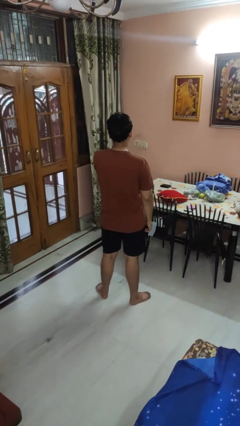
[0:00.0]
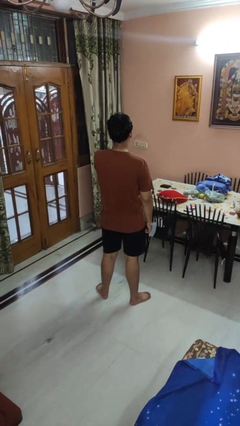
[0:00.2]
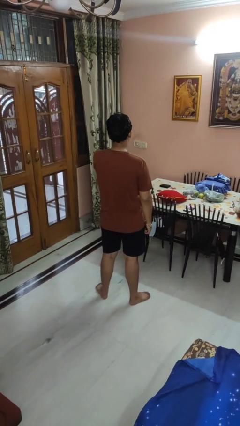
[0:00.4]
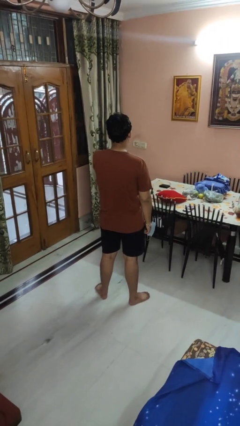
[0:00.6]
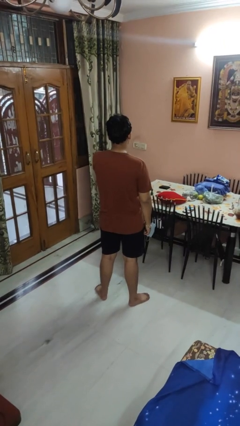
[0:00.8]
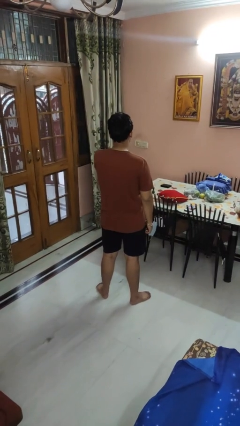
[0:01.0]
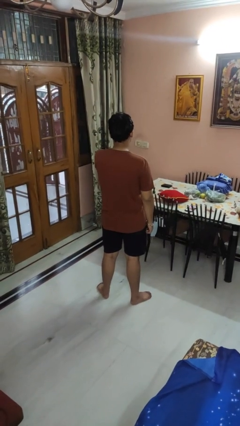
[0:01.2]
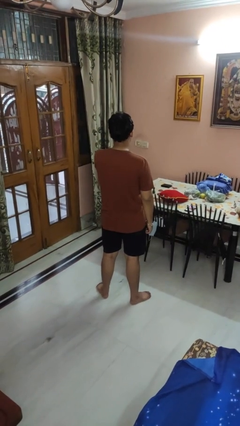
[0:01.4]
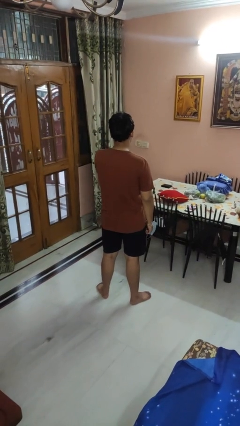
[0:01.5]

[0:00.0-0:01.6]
person gestures watch closely

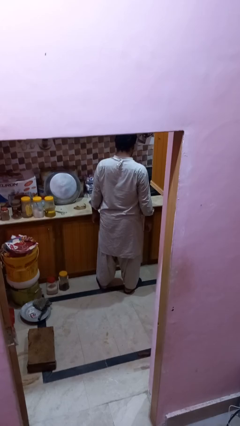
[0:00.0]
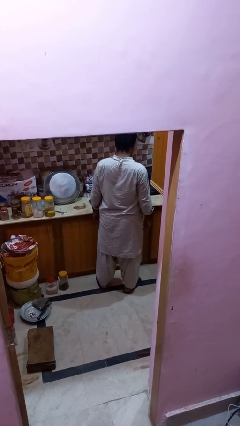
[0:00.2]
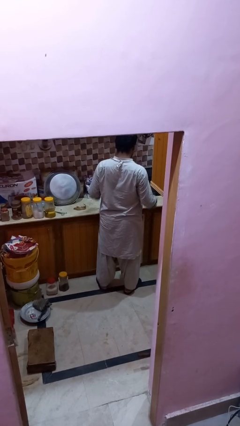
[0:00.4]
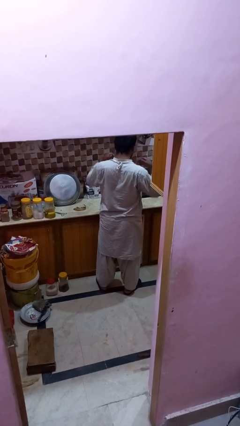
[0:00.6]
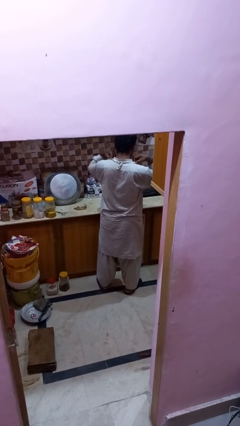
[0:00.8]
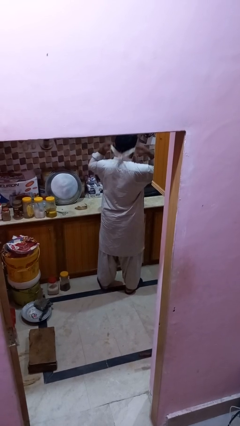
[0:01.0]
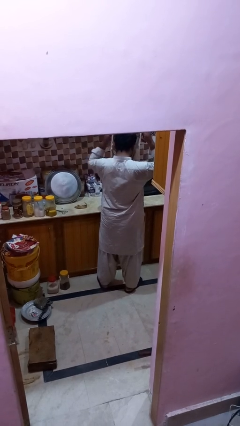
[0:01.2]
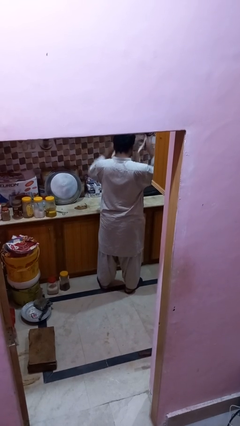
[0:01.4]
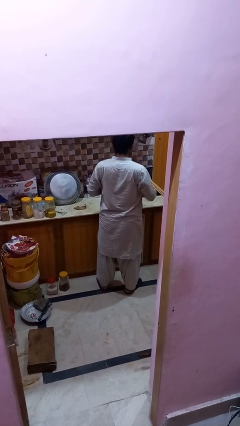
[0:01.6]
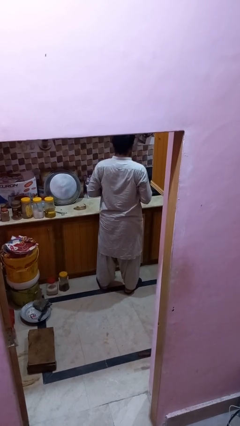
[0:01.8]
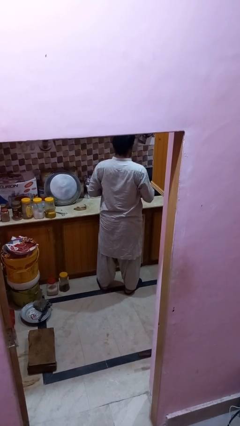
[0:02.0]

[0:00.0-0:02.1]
person takes off apron

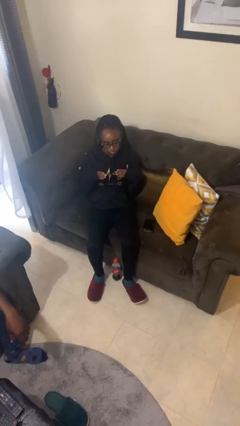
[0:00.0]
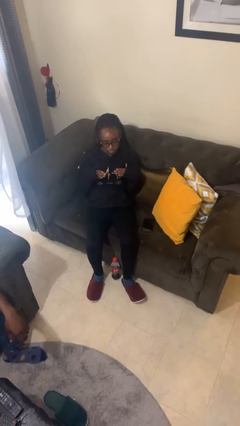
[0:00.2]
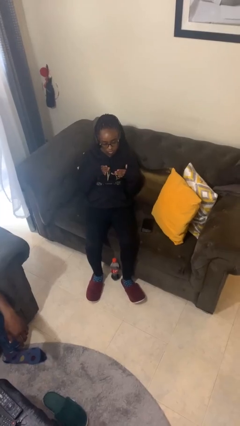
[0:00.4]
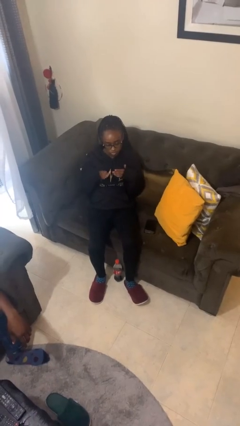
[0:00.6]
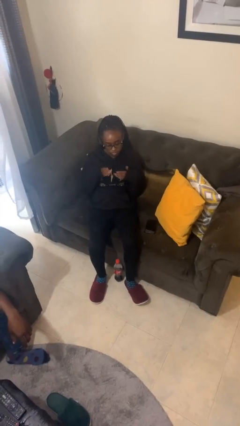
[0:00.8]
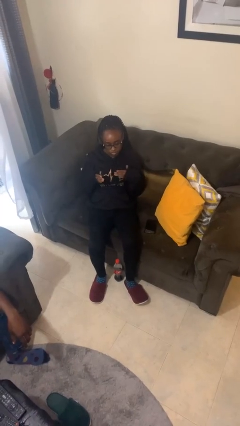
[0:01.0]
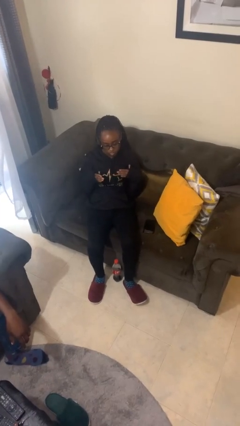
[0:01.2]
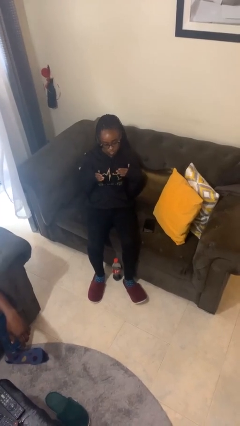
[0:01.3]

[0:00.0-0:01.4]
person drums on chest

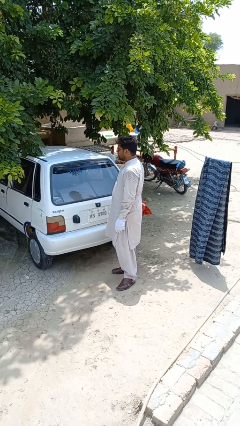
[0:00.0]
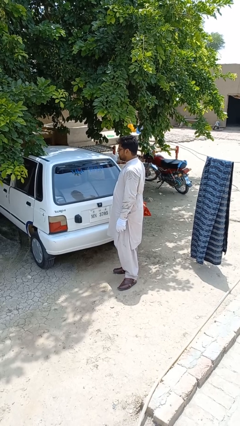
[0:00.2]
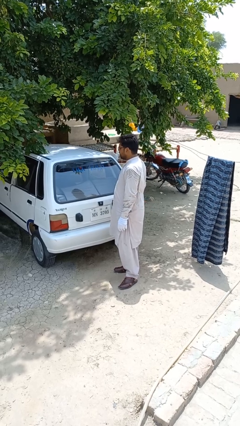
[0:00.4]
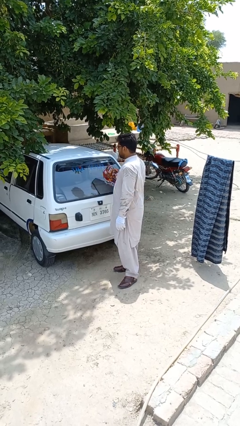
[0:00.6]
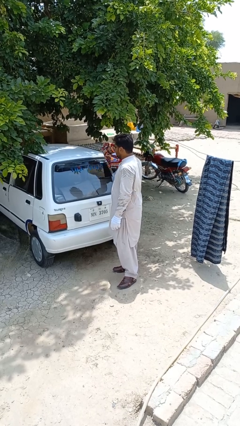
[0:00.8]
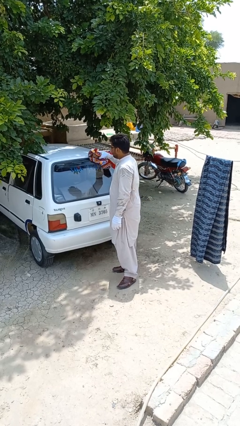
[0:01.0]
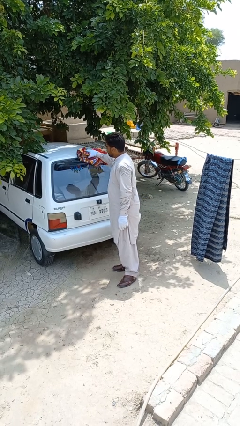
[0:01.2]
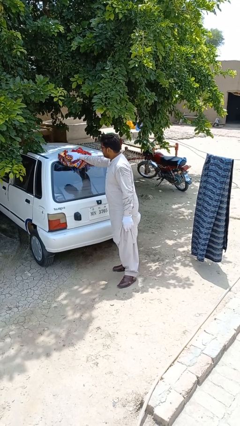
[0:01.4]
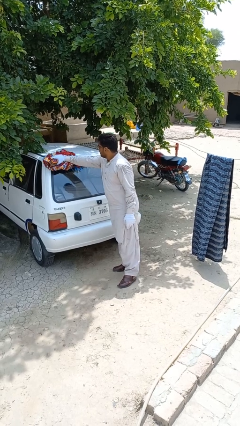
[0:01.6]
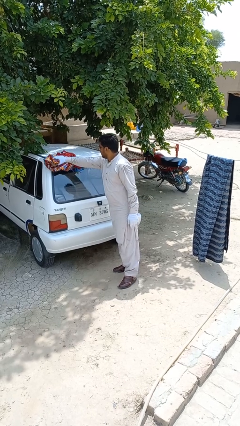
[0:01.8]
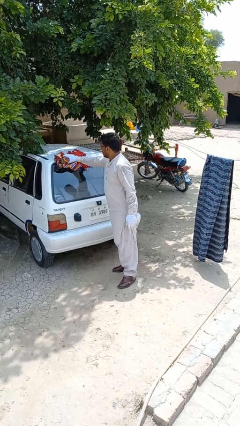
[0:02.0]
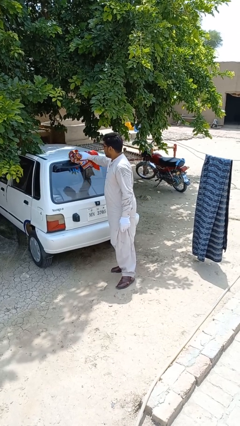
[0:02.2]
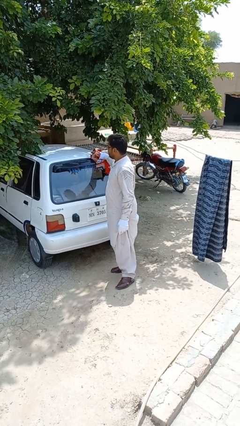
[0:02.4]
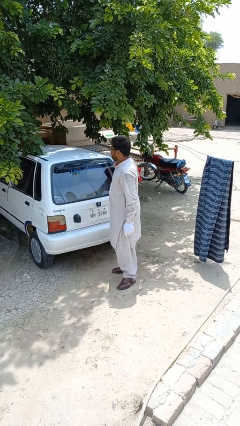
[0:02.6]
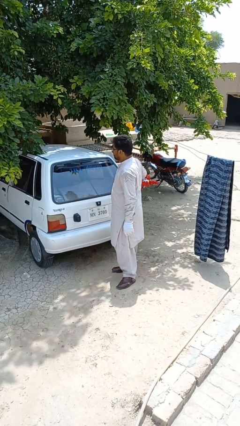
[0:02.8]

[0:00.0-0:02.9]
person polishes car with rag

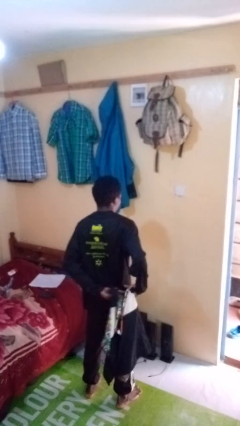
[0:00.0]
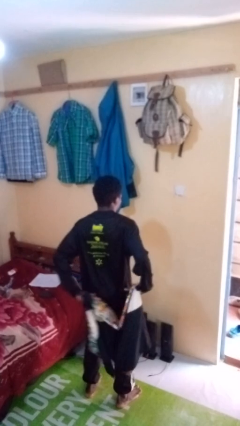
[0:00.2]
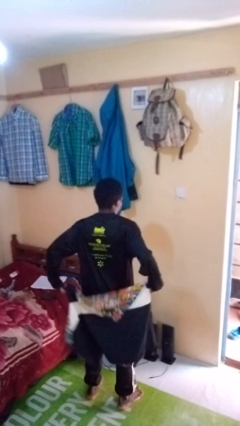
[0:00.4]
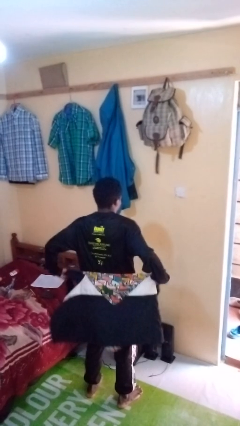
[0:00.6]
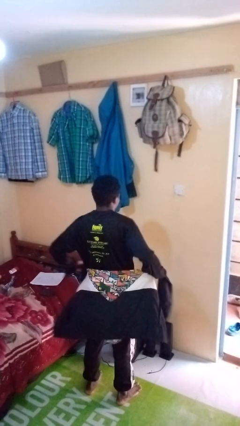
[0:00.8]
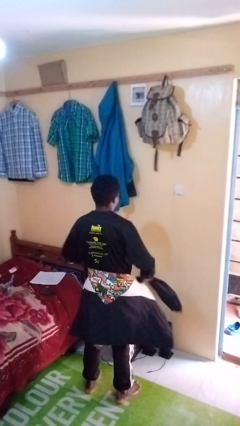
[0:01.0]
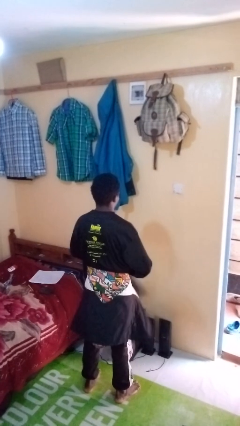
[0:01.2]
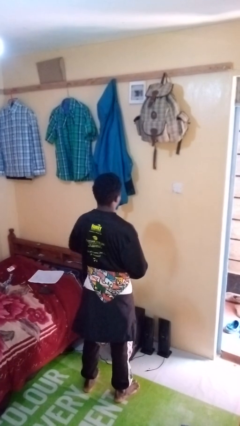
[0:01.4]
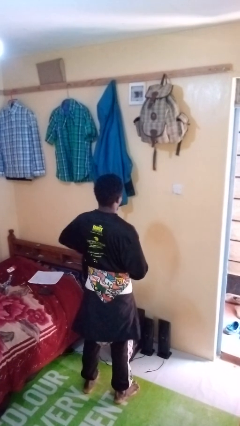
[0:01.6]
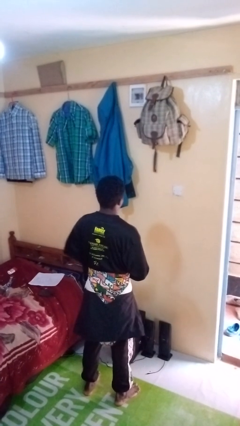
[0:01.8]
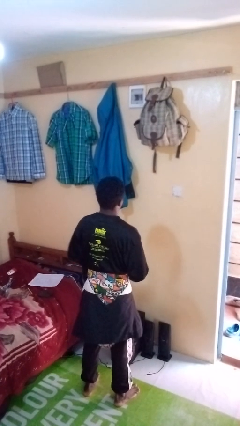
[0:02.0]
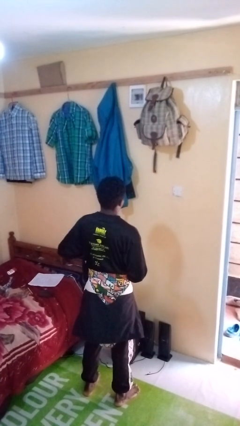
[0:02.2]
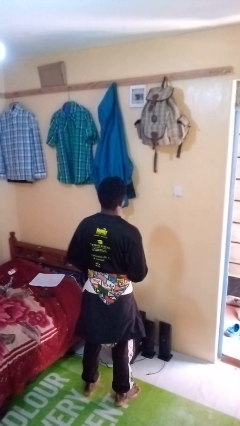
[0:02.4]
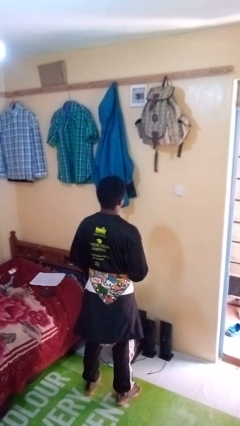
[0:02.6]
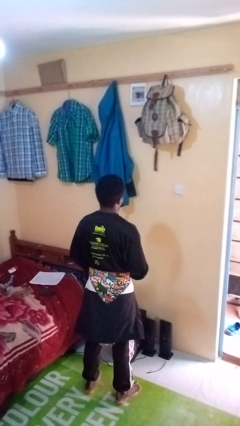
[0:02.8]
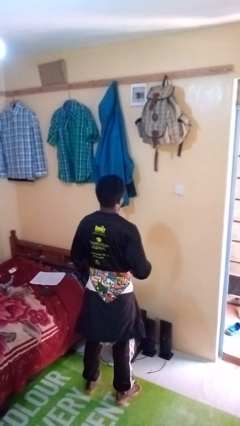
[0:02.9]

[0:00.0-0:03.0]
person ties jacket around waist

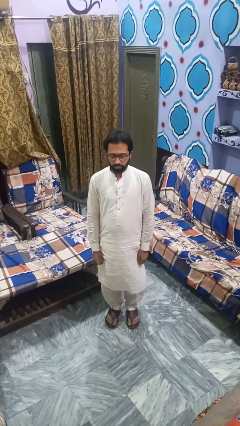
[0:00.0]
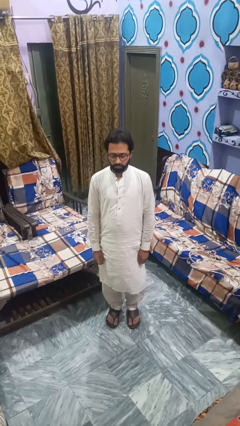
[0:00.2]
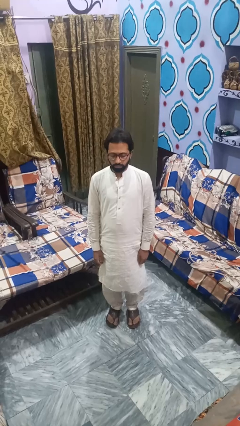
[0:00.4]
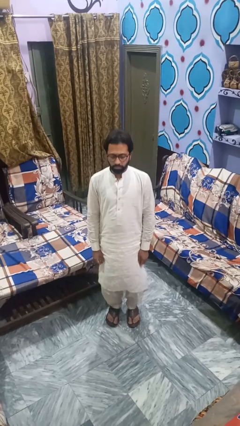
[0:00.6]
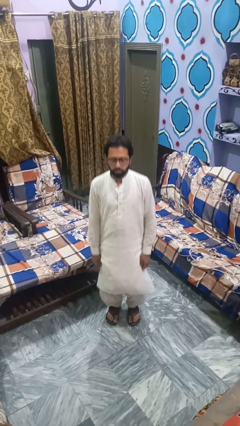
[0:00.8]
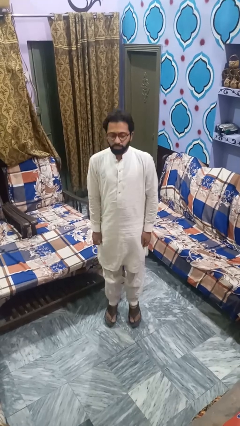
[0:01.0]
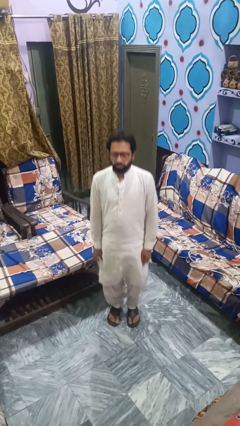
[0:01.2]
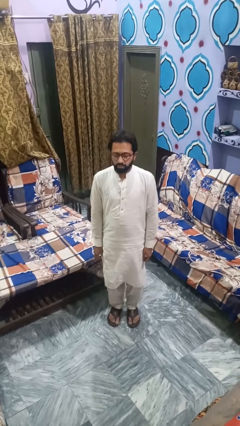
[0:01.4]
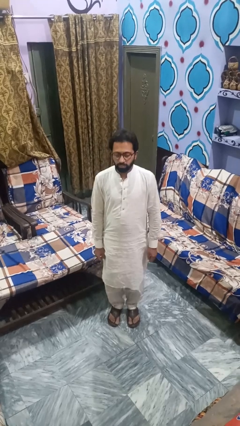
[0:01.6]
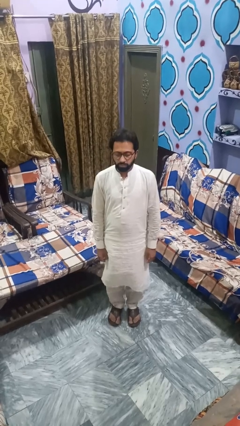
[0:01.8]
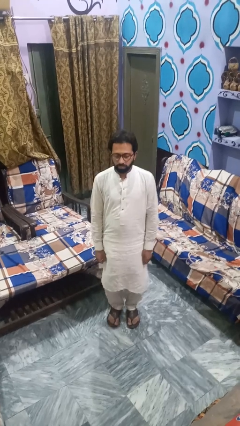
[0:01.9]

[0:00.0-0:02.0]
person jumps

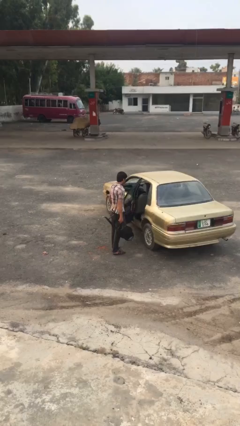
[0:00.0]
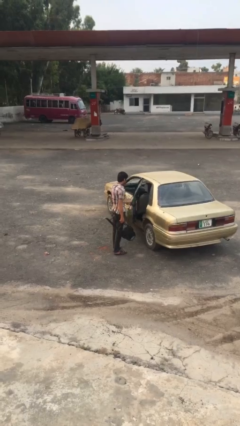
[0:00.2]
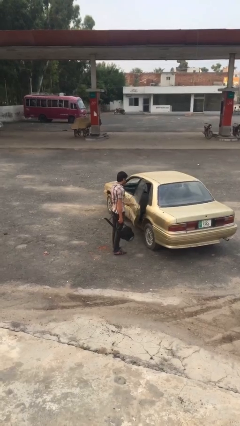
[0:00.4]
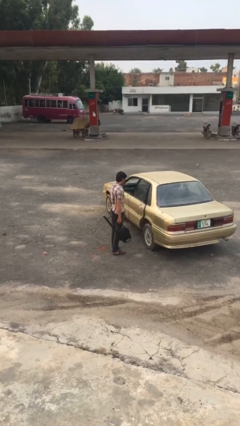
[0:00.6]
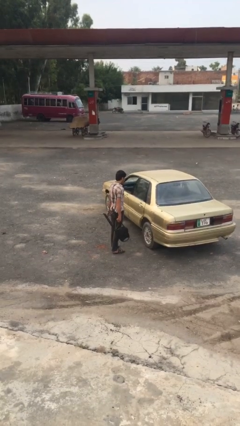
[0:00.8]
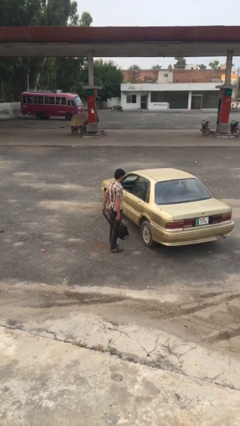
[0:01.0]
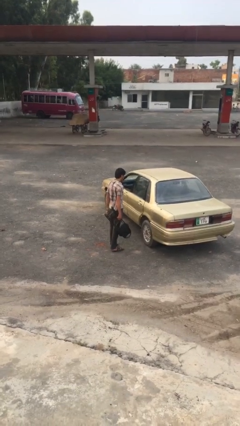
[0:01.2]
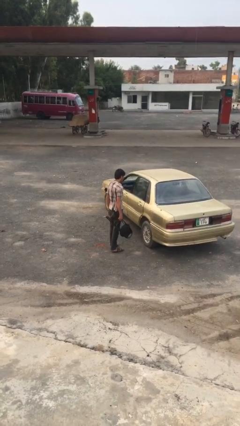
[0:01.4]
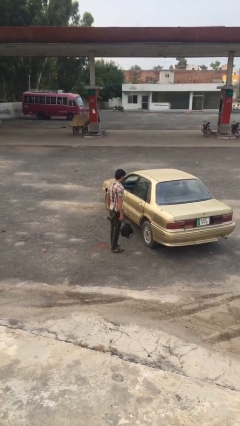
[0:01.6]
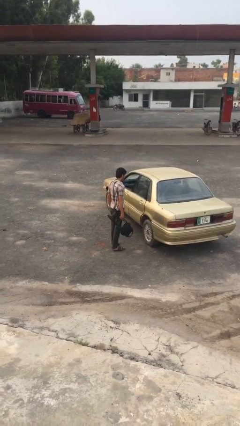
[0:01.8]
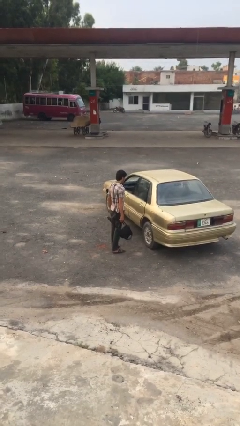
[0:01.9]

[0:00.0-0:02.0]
person closes car door

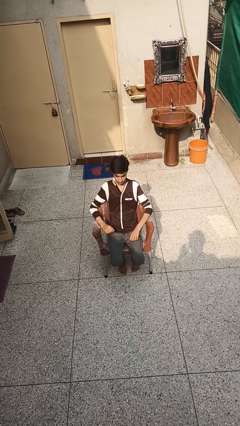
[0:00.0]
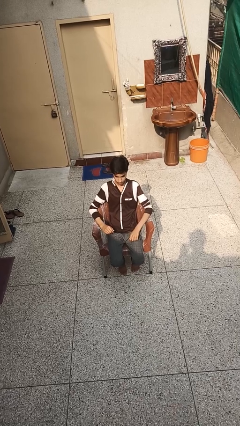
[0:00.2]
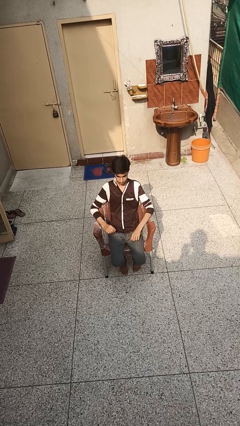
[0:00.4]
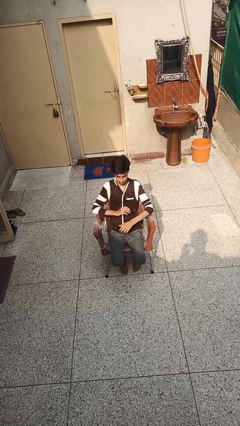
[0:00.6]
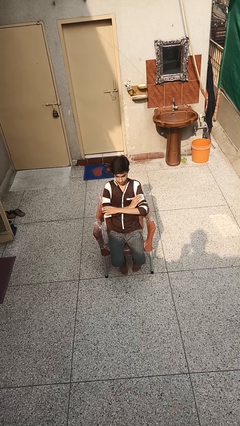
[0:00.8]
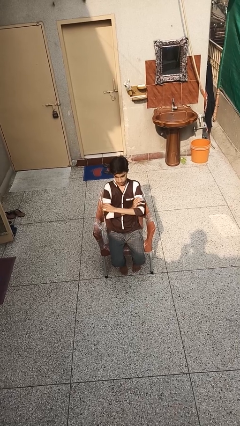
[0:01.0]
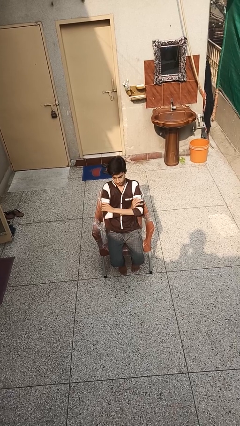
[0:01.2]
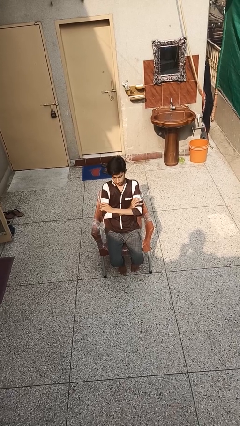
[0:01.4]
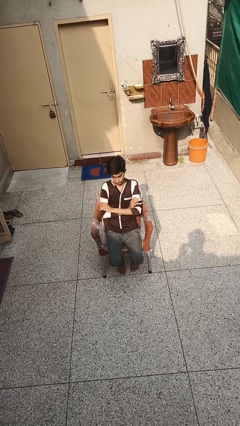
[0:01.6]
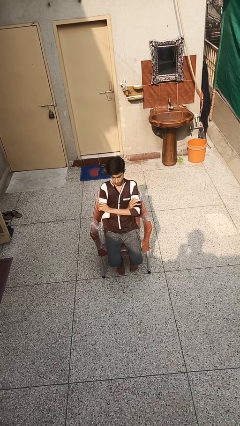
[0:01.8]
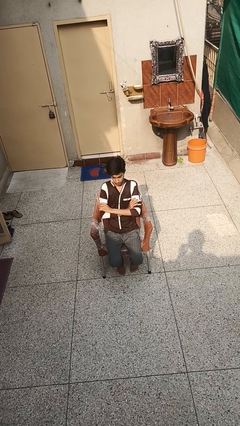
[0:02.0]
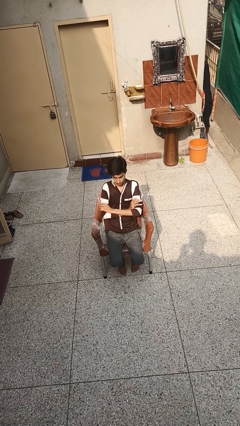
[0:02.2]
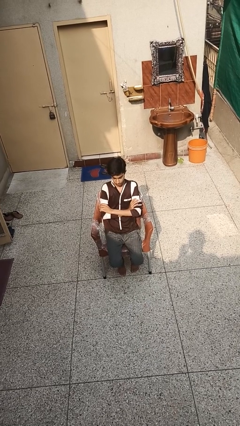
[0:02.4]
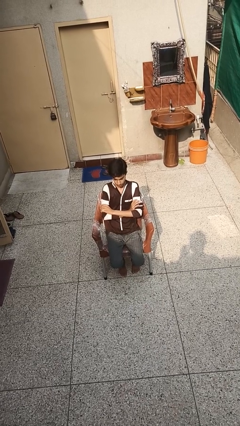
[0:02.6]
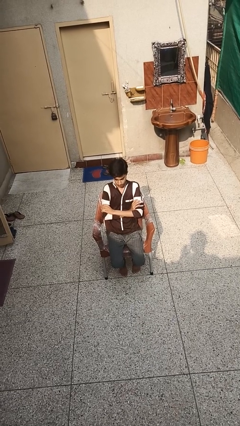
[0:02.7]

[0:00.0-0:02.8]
person crosses arms
